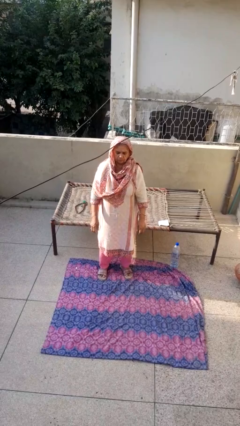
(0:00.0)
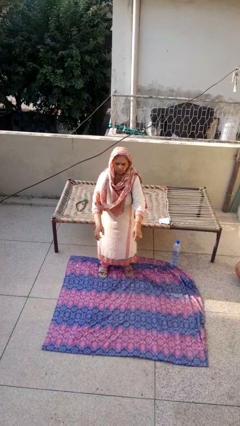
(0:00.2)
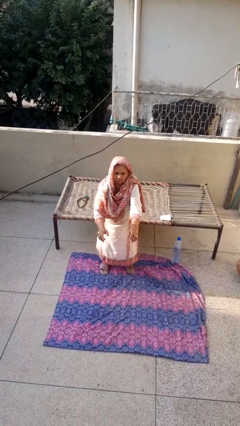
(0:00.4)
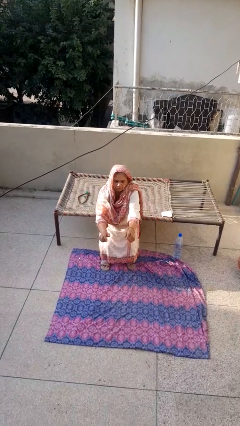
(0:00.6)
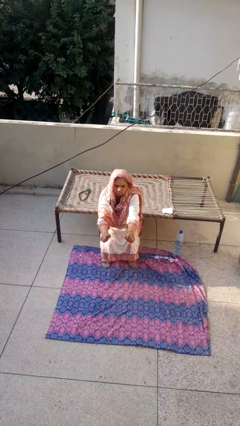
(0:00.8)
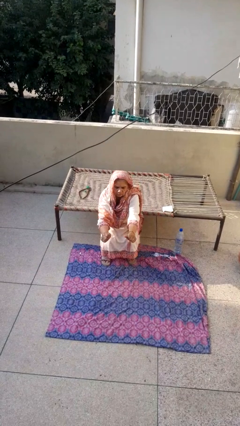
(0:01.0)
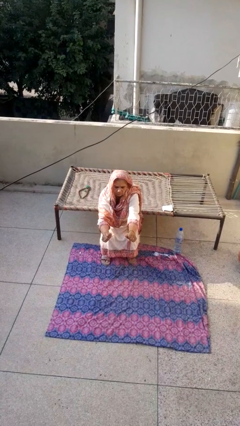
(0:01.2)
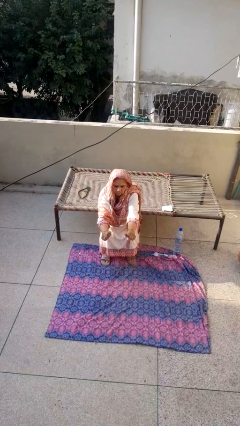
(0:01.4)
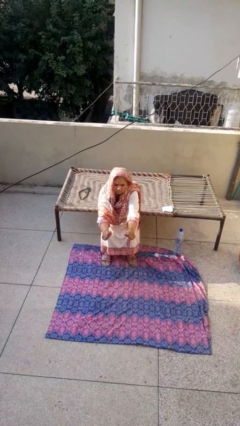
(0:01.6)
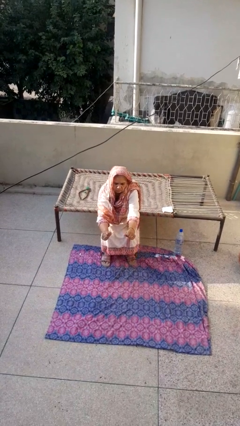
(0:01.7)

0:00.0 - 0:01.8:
person squats

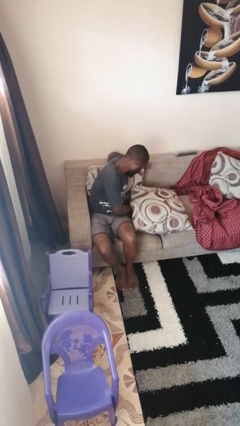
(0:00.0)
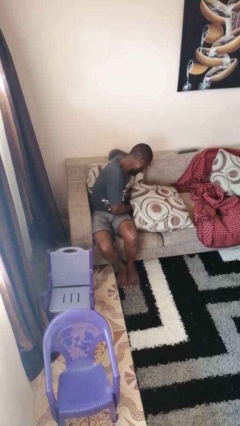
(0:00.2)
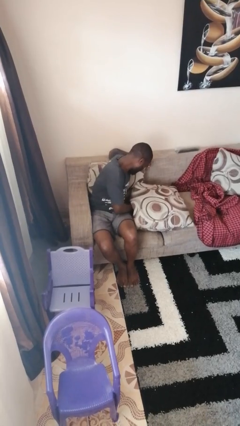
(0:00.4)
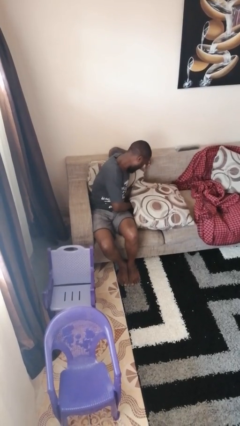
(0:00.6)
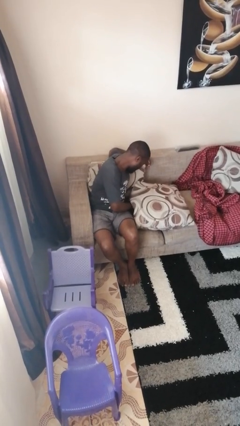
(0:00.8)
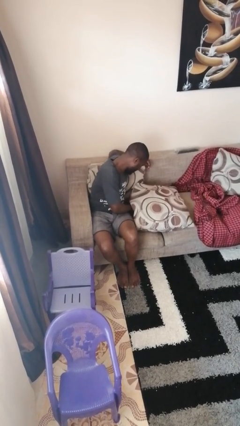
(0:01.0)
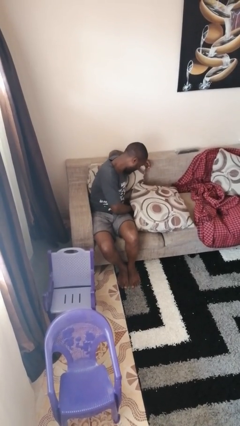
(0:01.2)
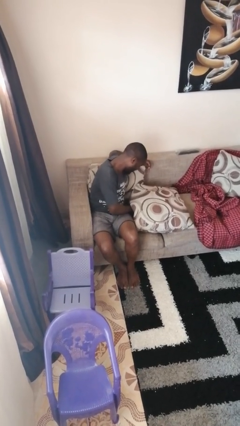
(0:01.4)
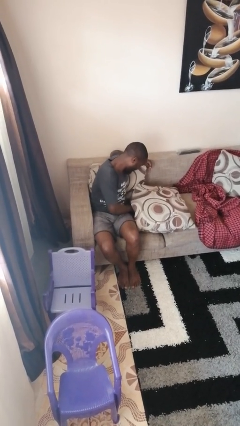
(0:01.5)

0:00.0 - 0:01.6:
person searches in couch

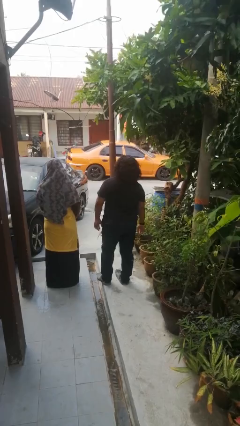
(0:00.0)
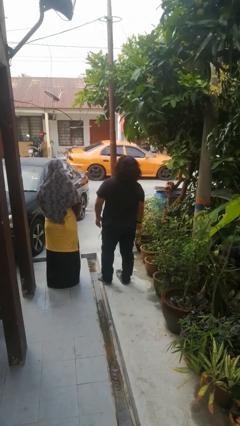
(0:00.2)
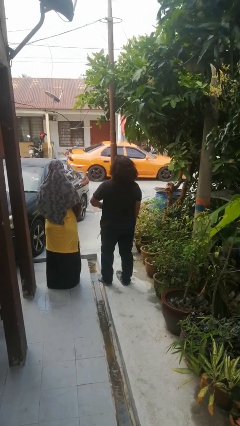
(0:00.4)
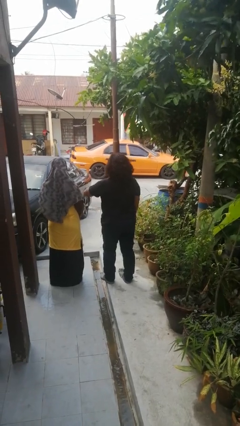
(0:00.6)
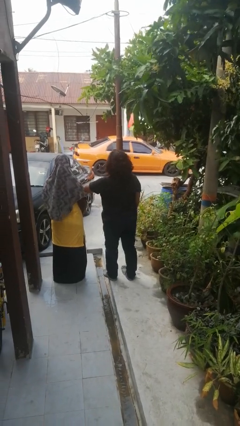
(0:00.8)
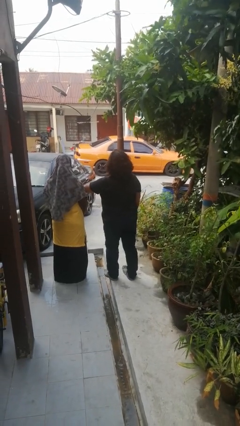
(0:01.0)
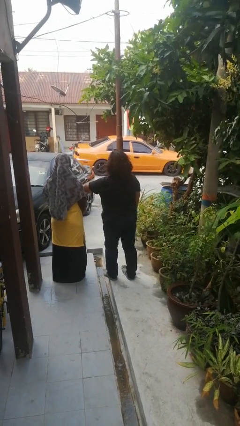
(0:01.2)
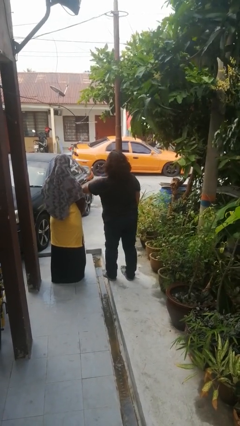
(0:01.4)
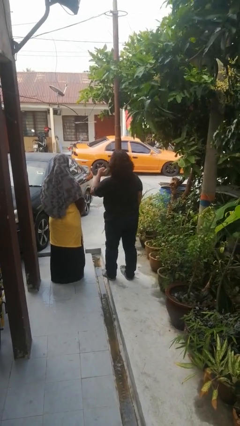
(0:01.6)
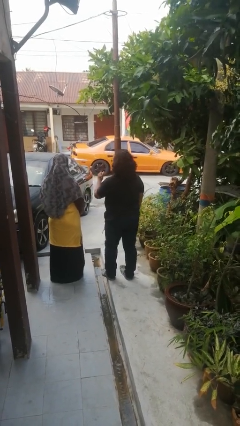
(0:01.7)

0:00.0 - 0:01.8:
person nudges person with elbow

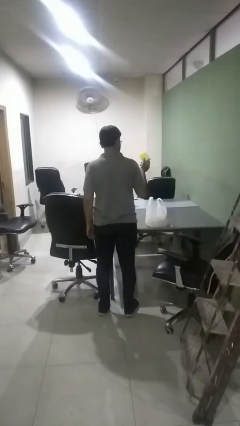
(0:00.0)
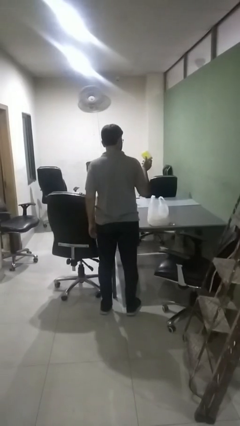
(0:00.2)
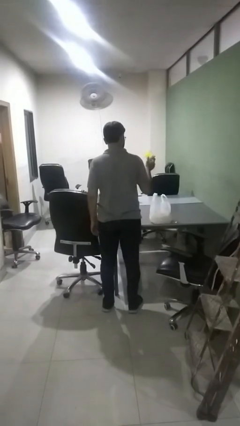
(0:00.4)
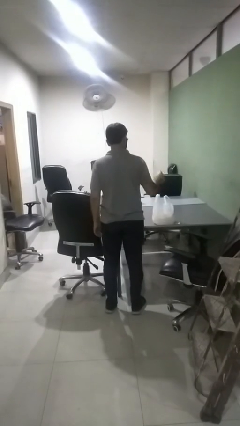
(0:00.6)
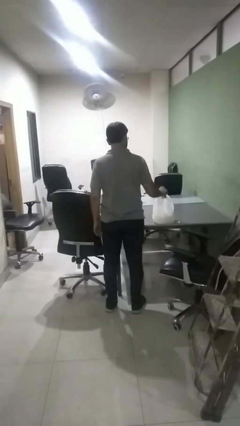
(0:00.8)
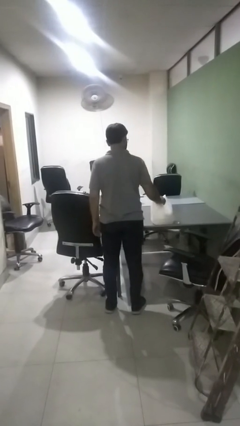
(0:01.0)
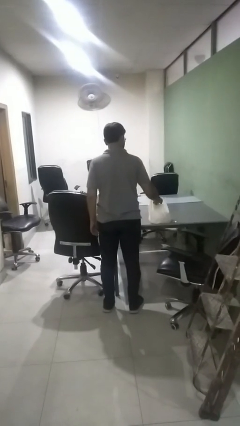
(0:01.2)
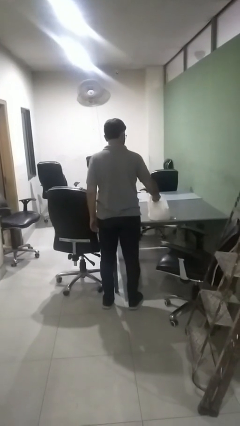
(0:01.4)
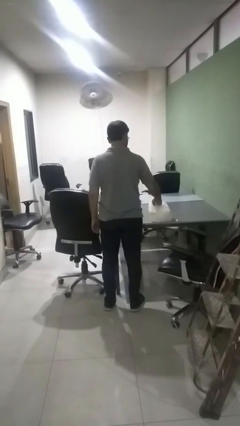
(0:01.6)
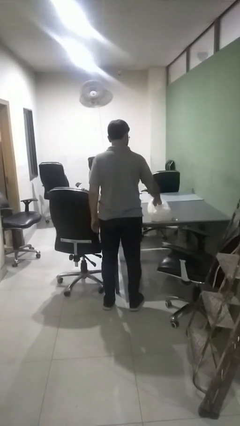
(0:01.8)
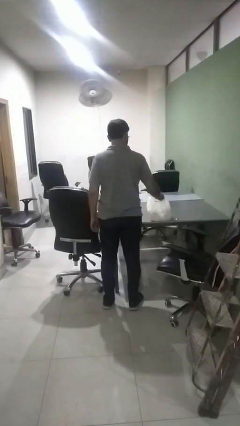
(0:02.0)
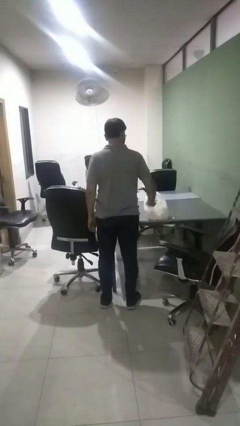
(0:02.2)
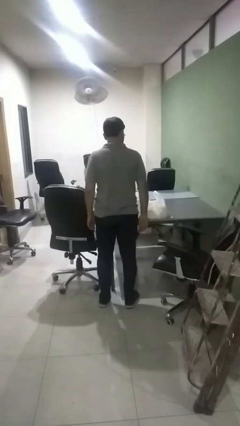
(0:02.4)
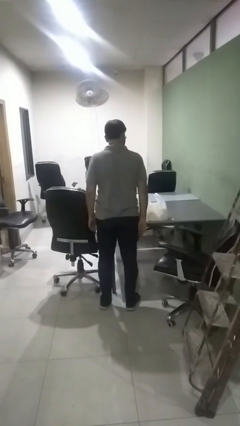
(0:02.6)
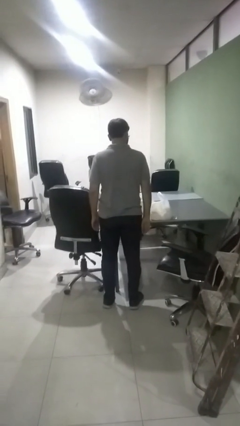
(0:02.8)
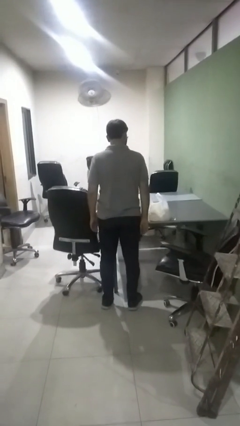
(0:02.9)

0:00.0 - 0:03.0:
person puts object into bag

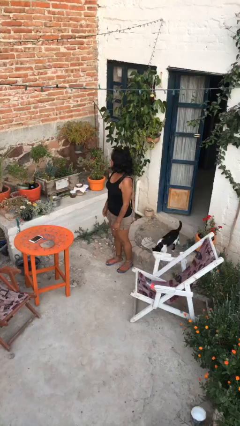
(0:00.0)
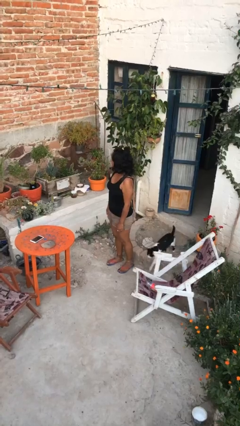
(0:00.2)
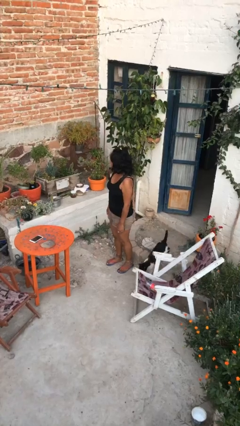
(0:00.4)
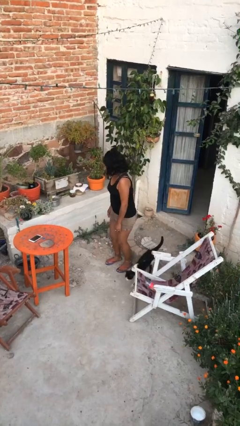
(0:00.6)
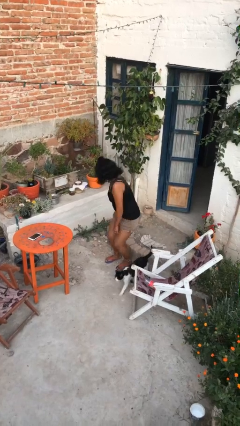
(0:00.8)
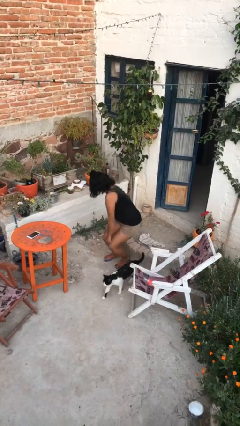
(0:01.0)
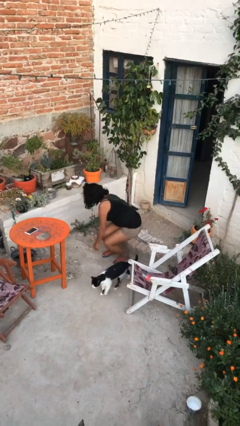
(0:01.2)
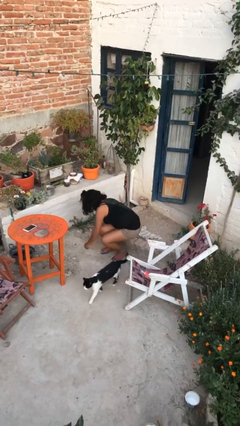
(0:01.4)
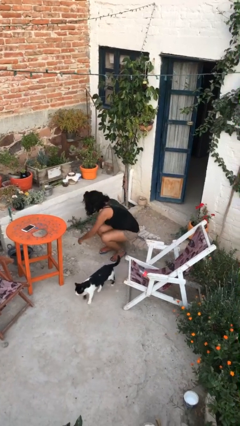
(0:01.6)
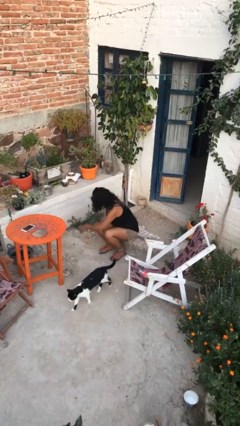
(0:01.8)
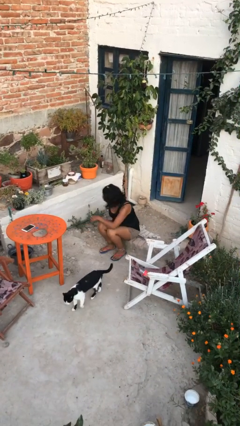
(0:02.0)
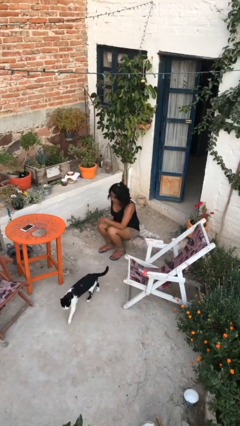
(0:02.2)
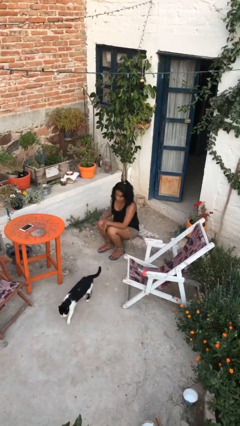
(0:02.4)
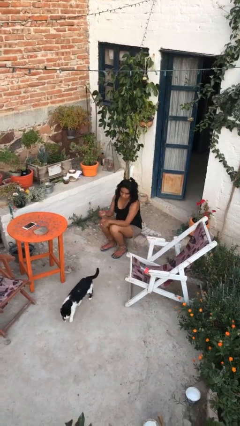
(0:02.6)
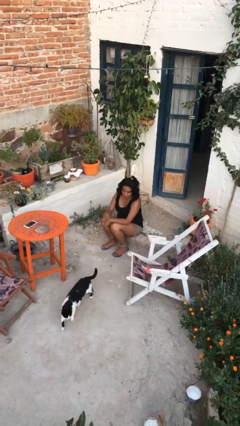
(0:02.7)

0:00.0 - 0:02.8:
person sits down

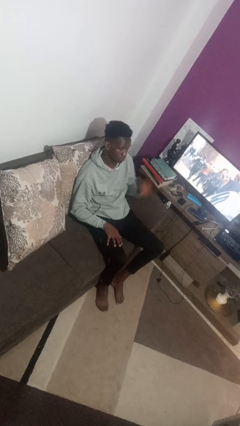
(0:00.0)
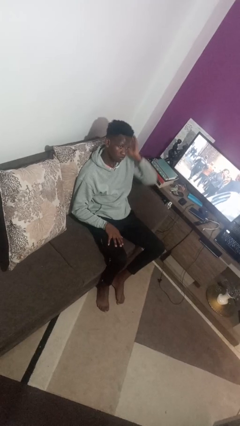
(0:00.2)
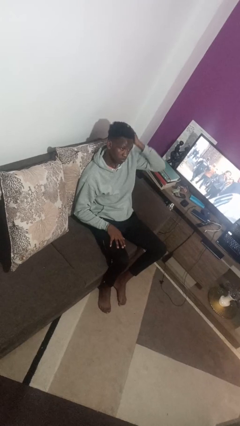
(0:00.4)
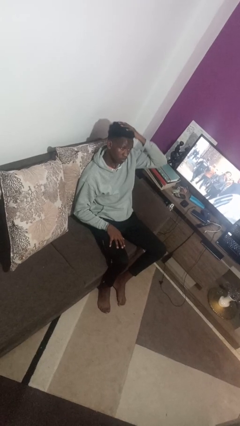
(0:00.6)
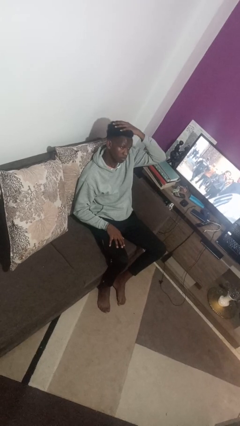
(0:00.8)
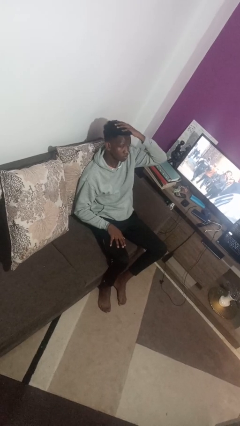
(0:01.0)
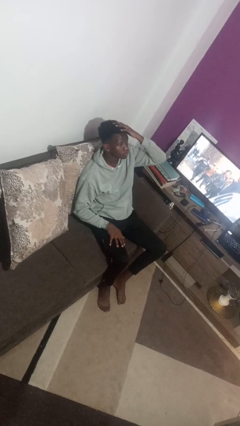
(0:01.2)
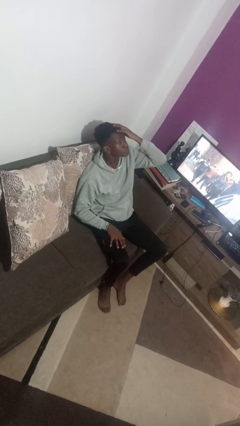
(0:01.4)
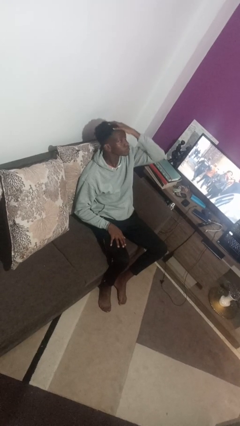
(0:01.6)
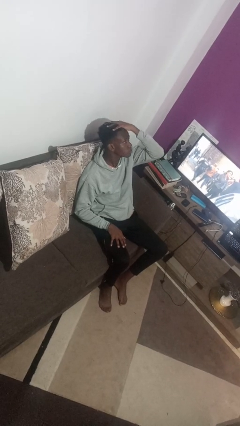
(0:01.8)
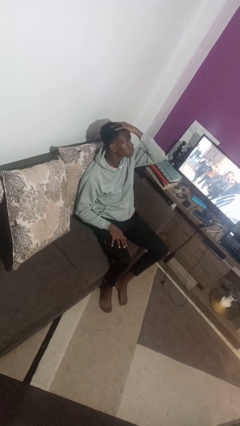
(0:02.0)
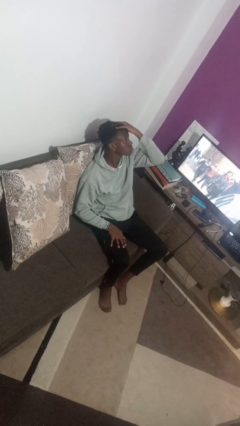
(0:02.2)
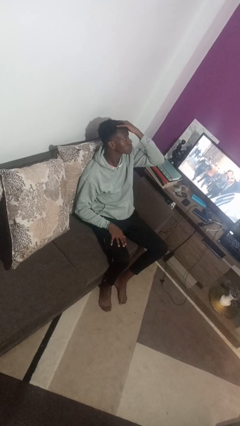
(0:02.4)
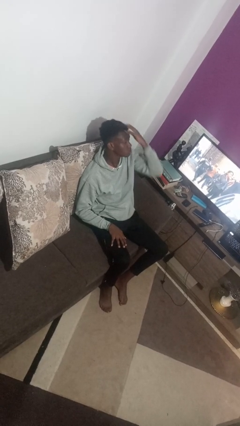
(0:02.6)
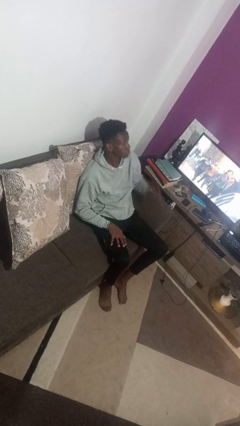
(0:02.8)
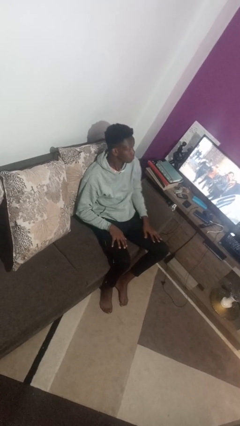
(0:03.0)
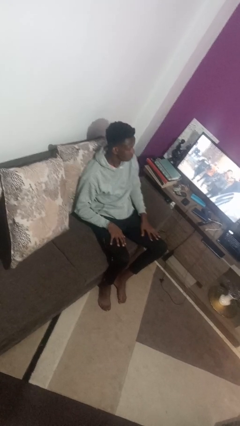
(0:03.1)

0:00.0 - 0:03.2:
person strokes hair

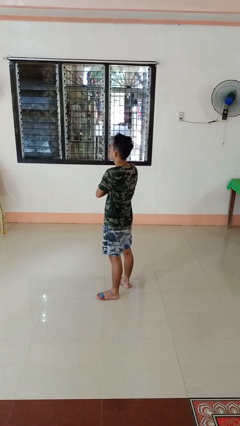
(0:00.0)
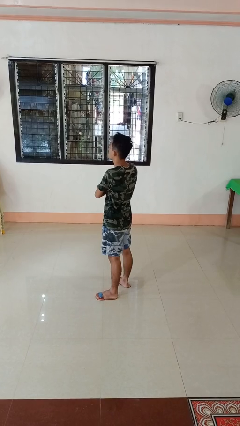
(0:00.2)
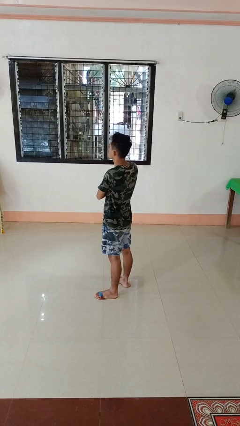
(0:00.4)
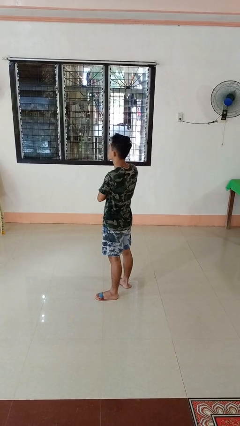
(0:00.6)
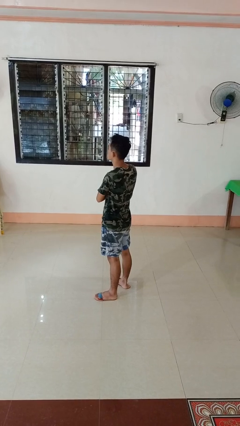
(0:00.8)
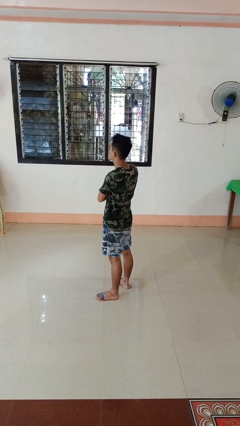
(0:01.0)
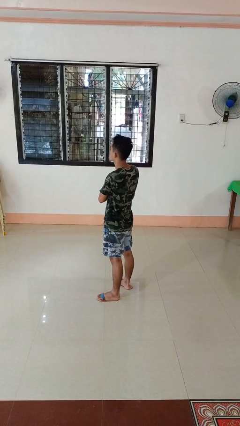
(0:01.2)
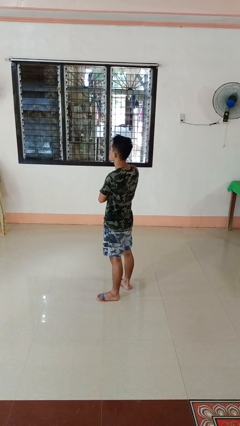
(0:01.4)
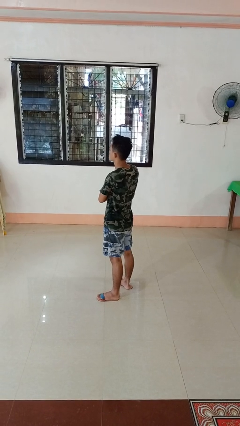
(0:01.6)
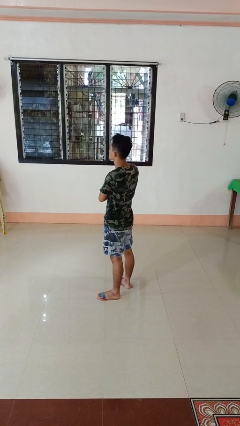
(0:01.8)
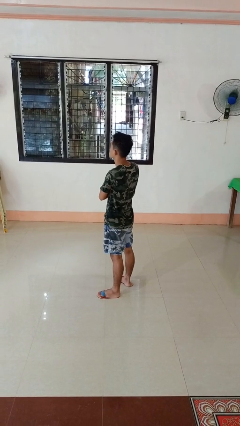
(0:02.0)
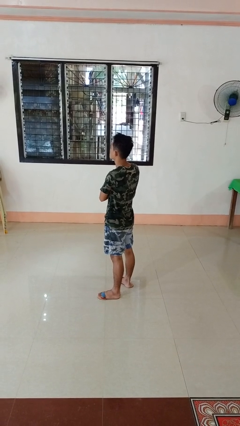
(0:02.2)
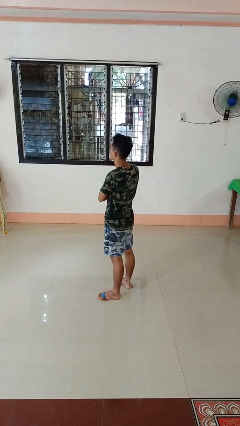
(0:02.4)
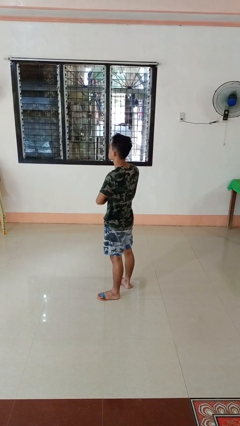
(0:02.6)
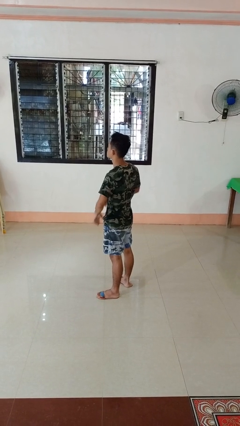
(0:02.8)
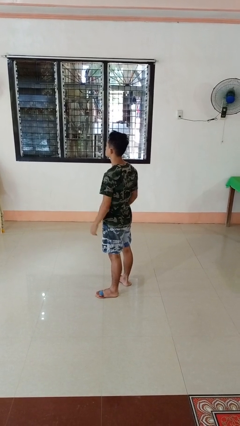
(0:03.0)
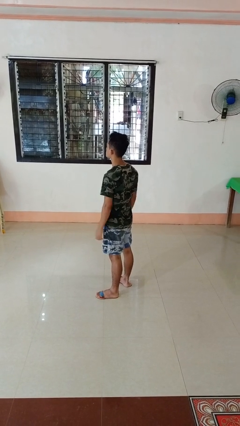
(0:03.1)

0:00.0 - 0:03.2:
person crosses arms
